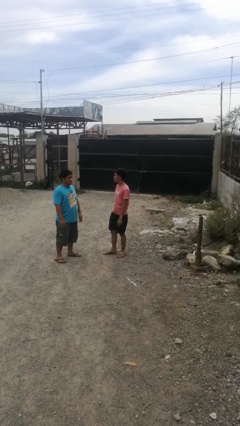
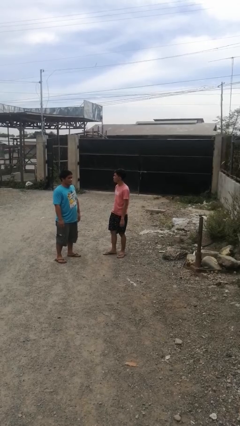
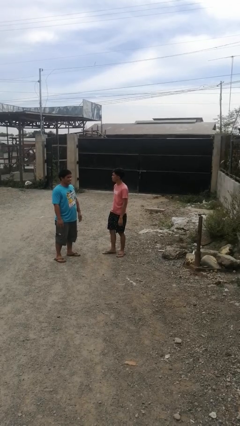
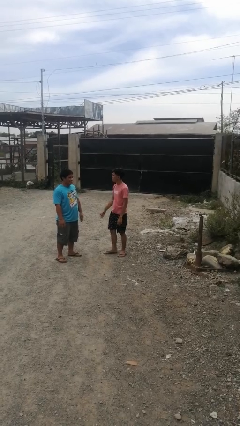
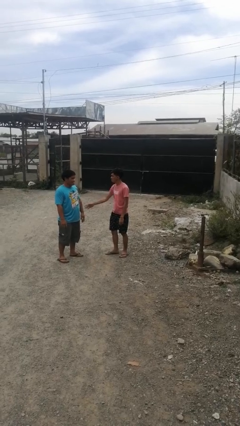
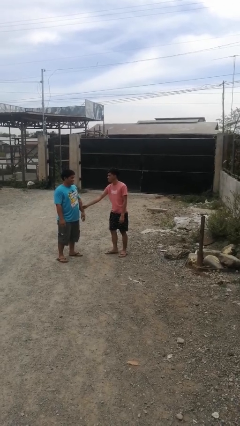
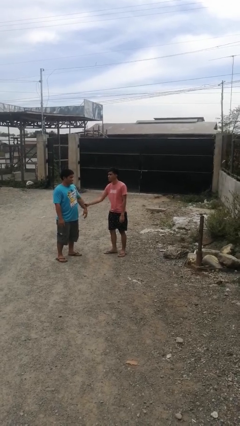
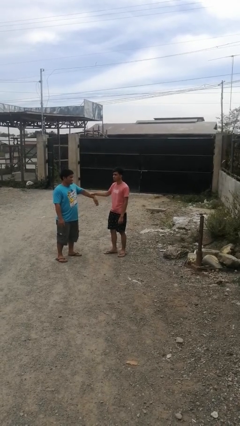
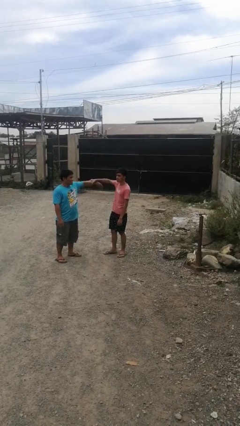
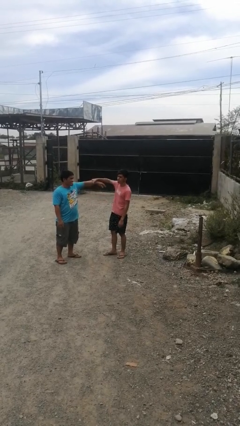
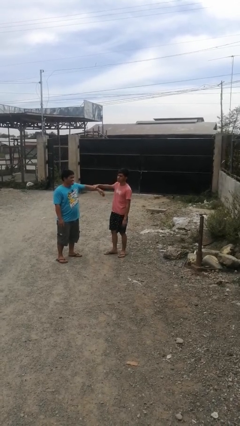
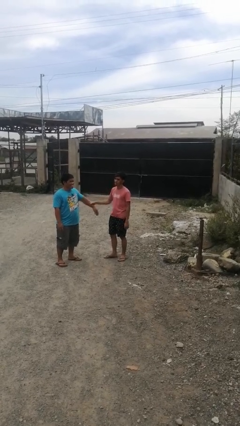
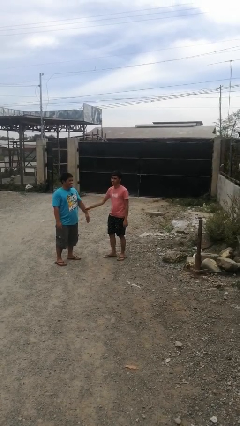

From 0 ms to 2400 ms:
person grabs person by forearm

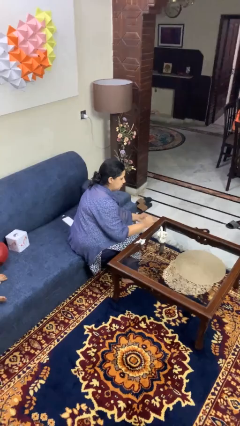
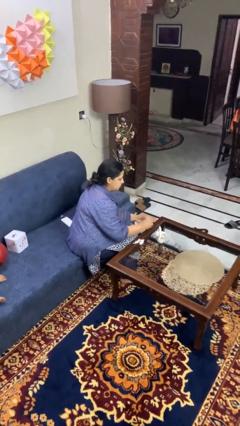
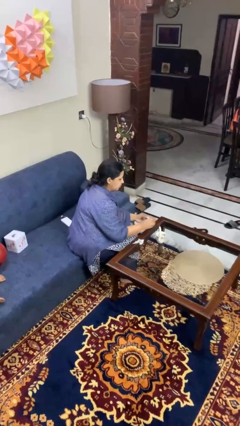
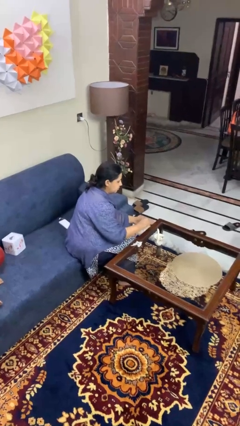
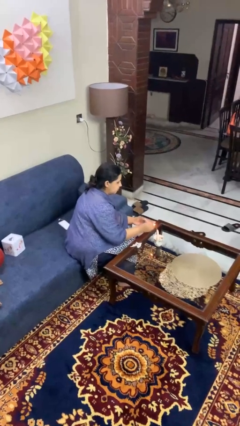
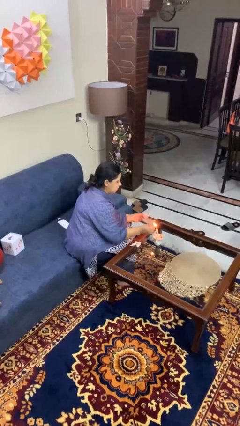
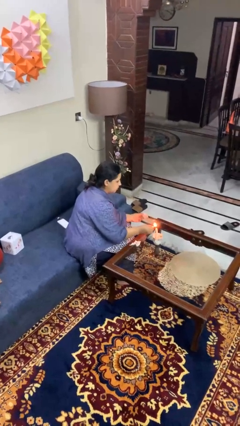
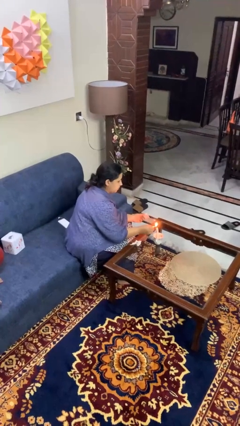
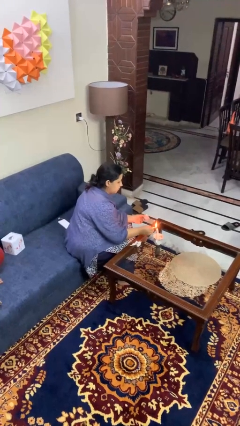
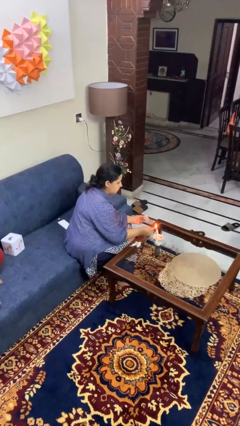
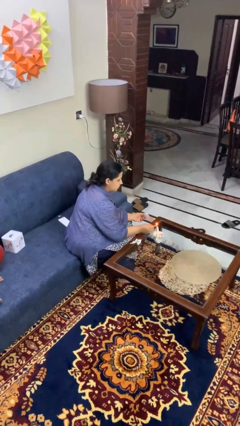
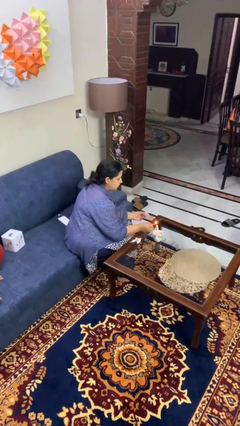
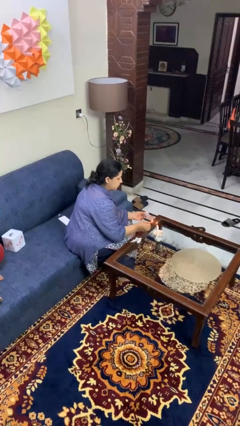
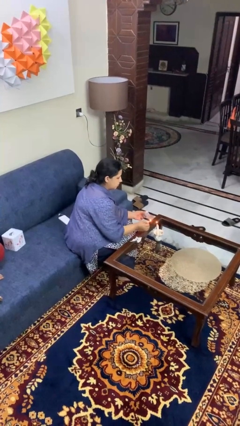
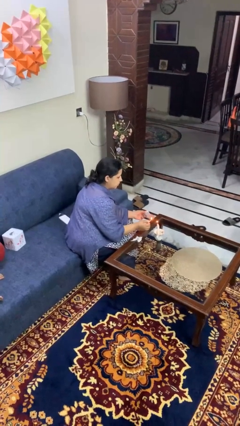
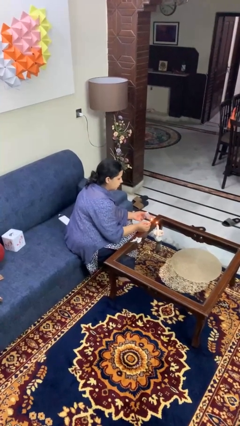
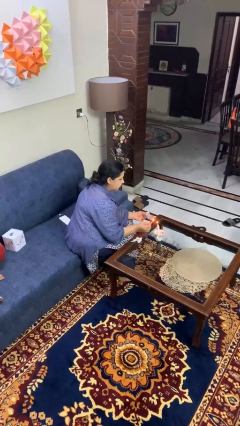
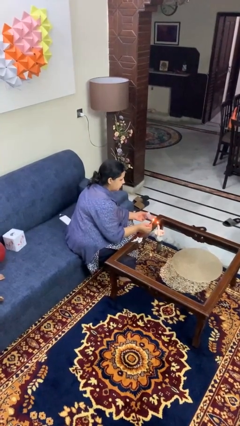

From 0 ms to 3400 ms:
person lights candle

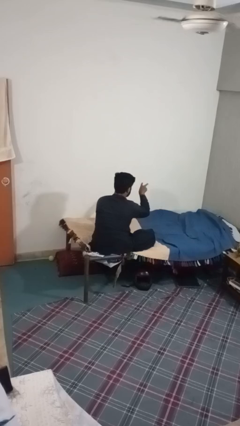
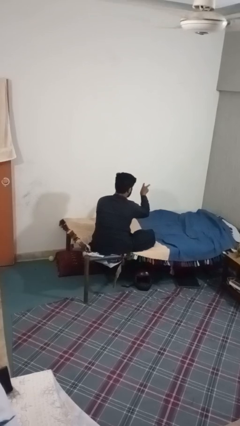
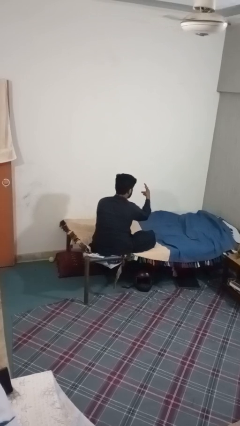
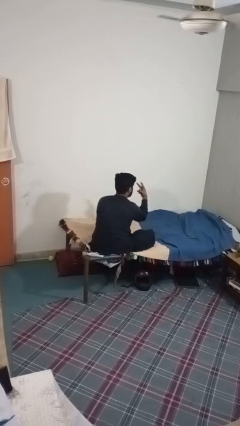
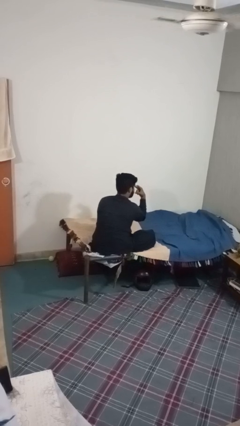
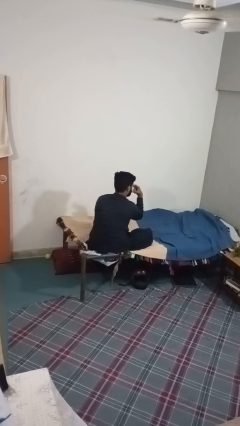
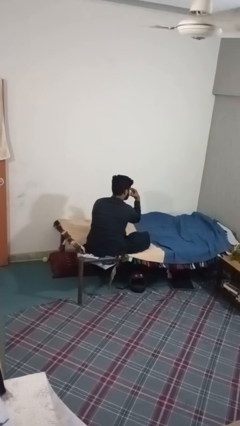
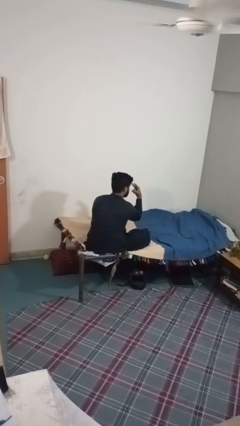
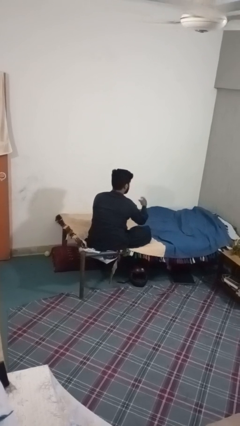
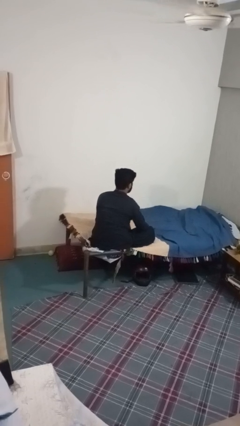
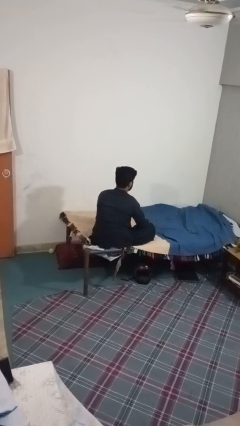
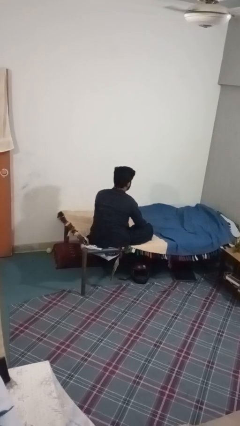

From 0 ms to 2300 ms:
person gestures watch closely

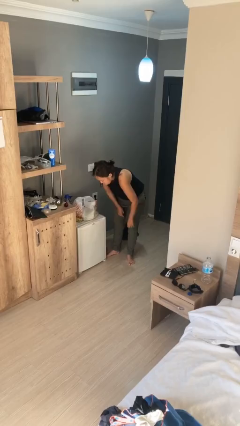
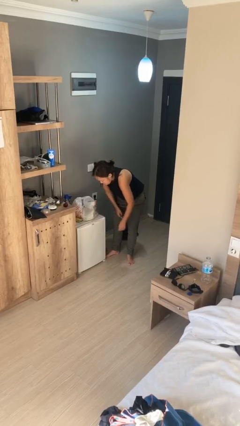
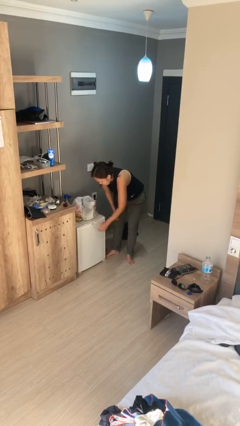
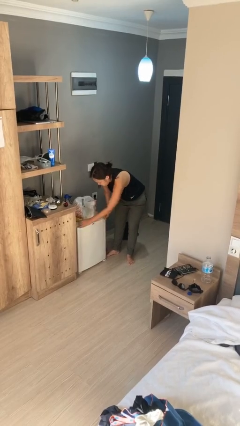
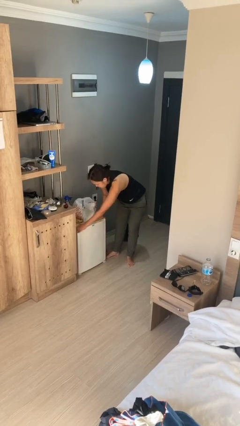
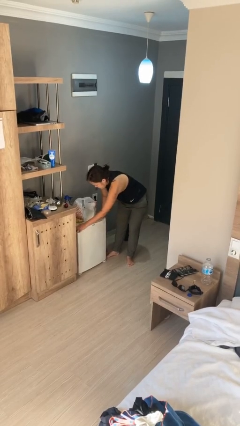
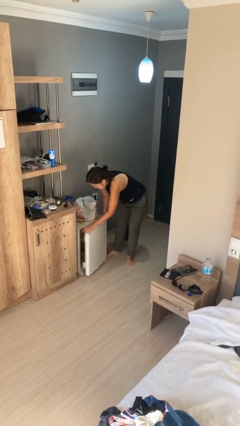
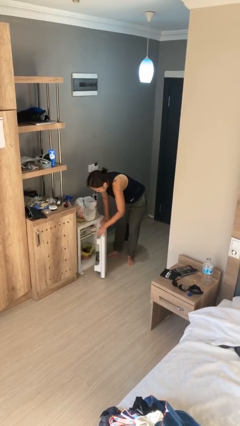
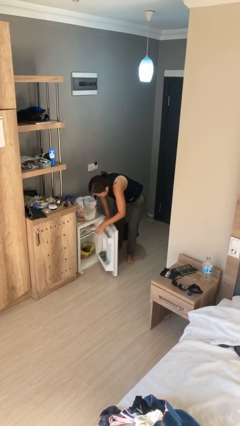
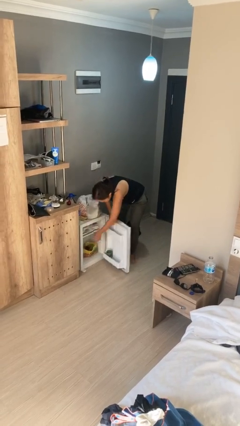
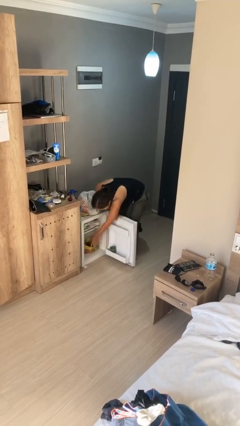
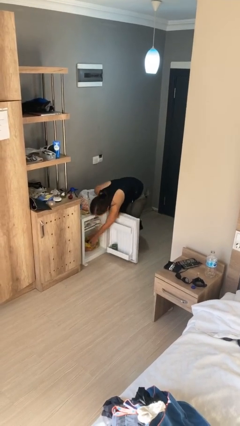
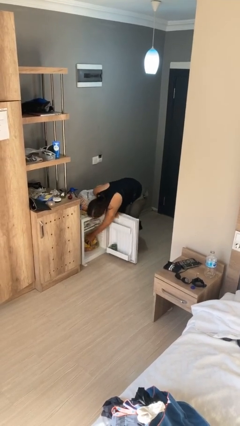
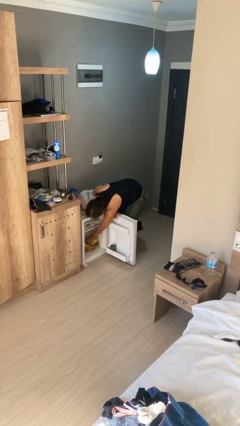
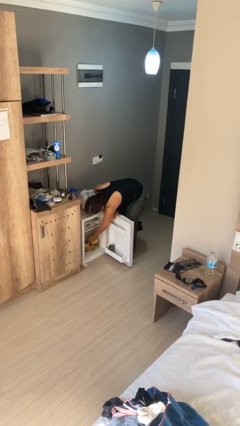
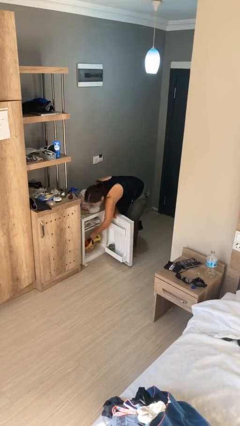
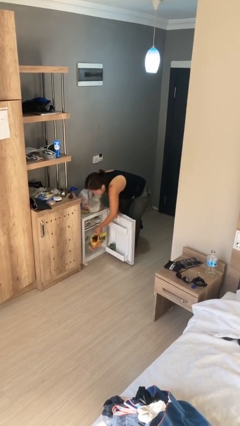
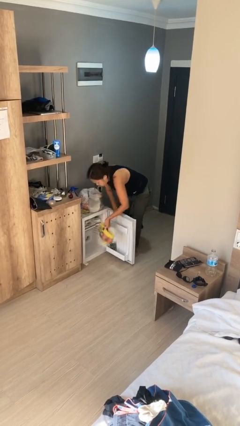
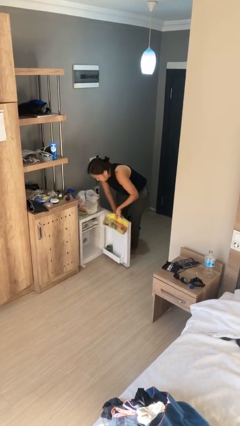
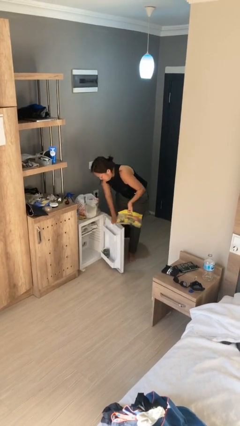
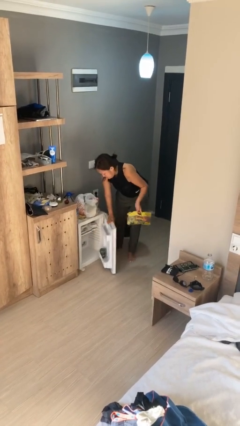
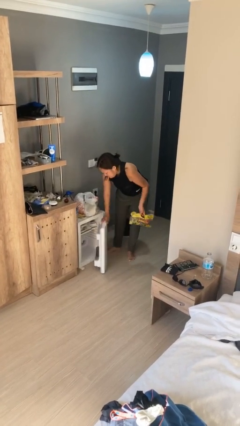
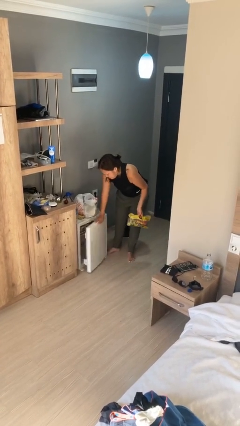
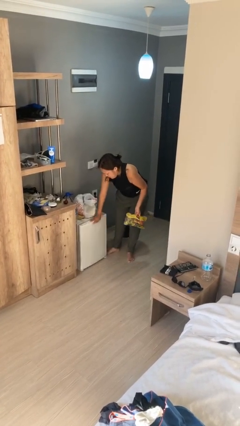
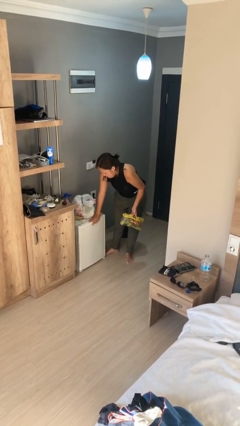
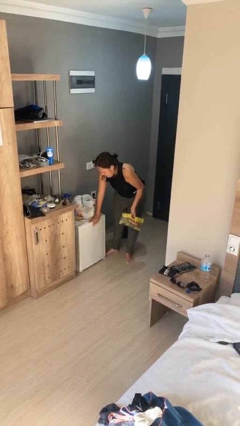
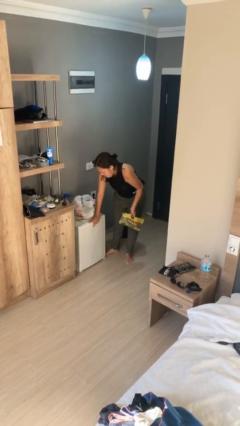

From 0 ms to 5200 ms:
person takes object from refrigerator

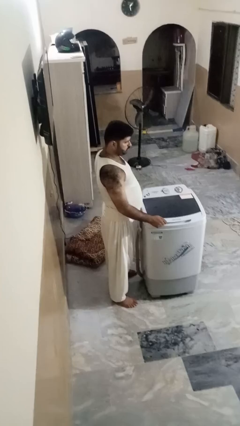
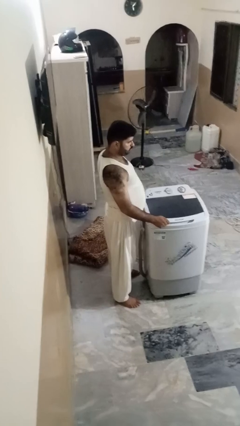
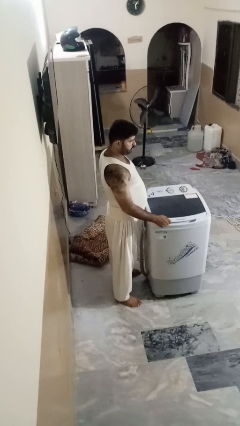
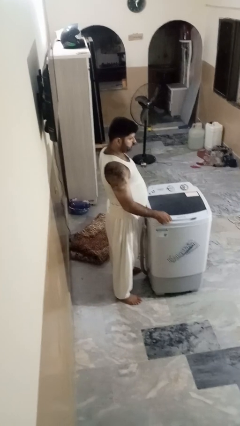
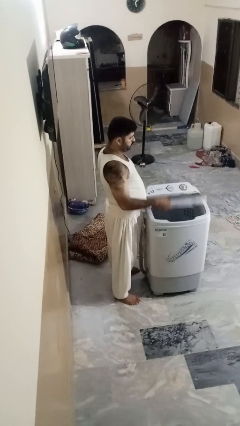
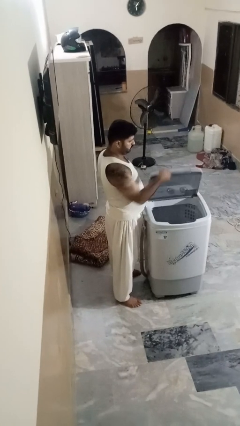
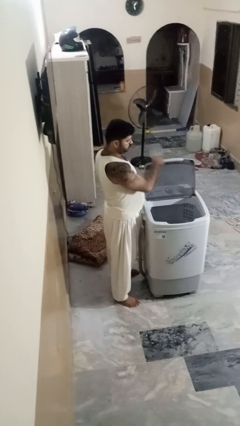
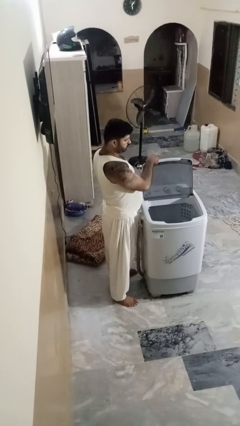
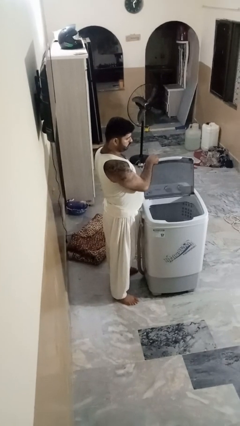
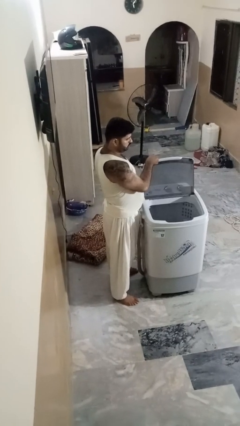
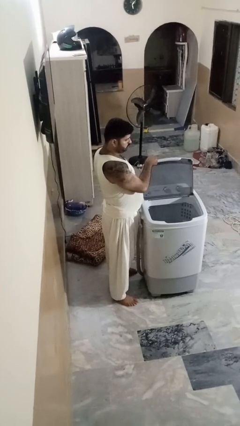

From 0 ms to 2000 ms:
person opens clothes washer

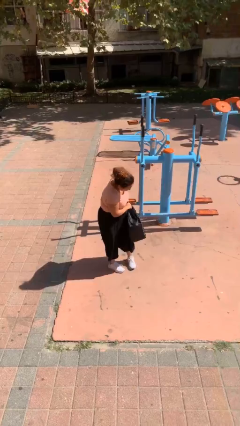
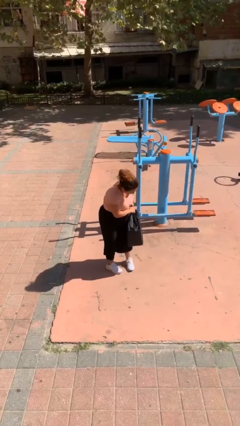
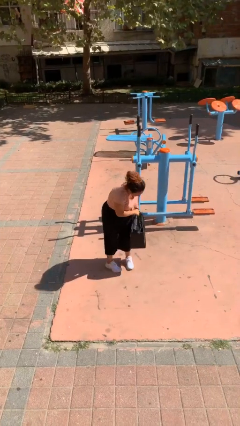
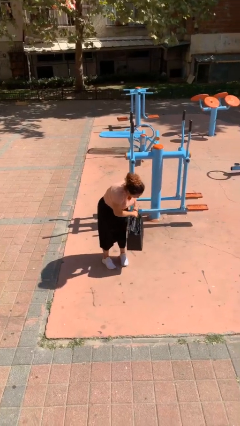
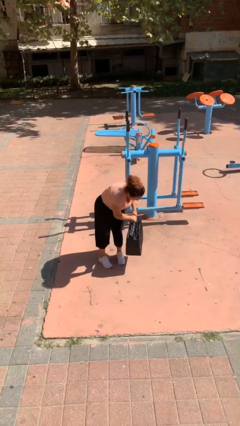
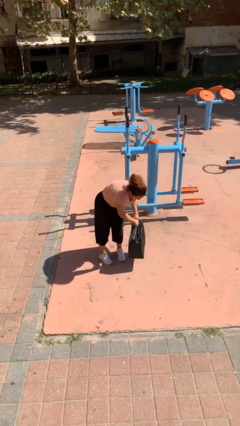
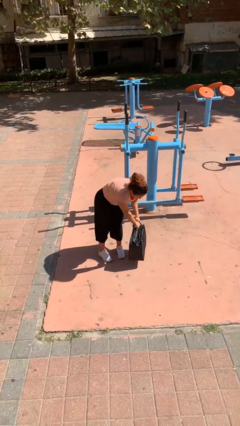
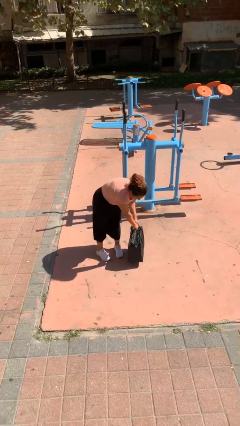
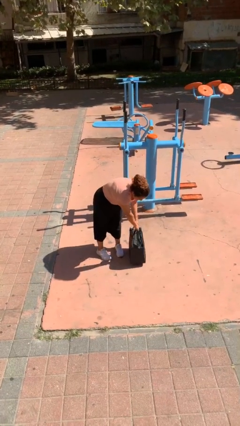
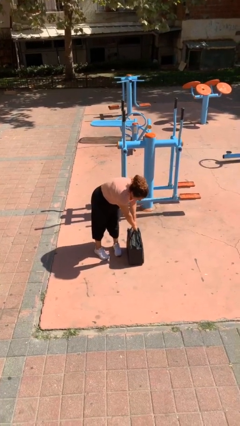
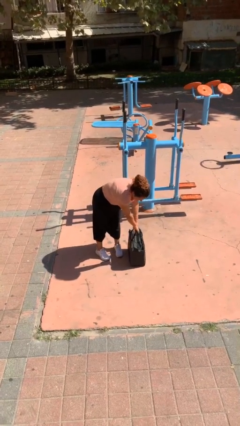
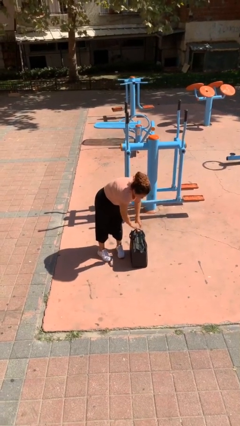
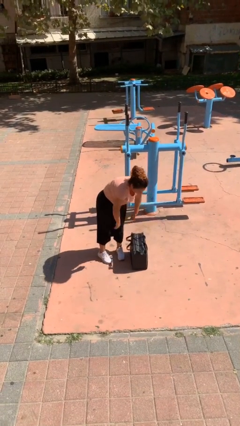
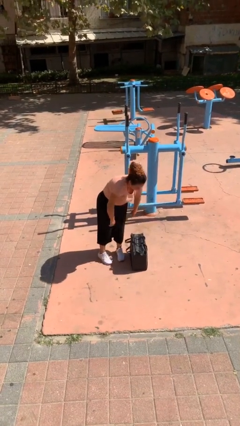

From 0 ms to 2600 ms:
person puts down object on floor
